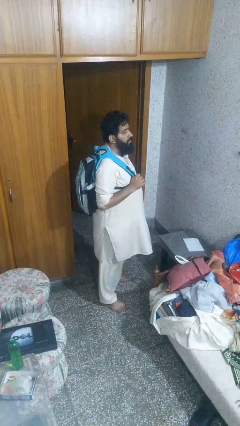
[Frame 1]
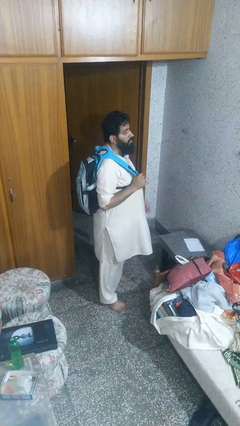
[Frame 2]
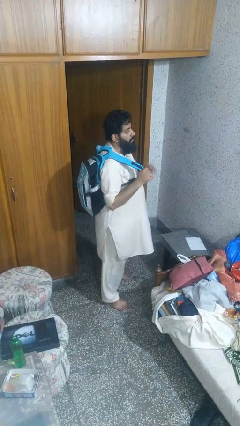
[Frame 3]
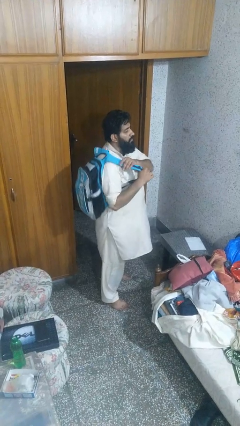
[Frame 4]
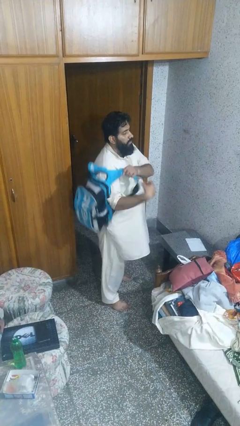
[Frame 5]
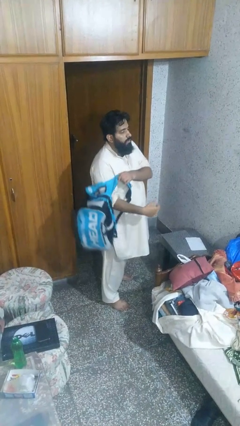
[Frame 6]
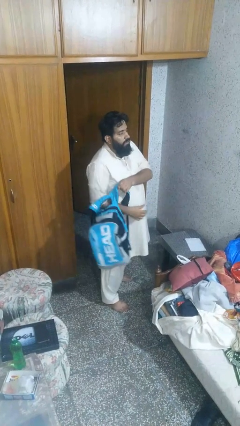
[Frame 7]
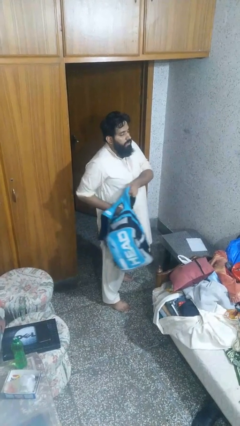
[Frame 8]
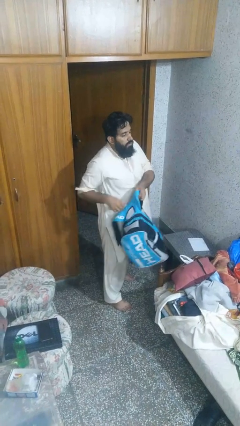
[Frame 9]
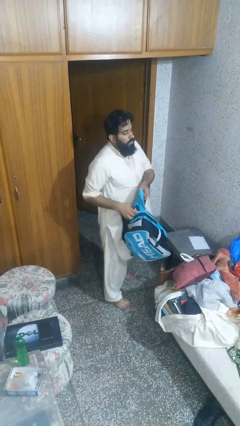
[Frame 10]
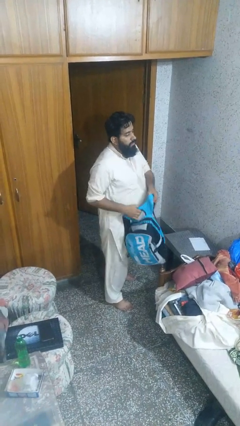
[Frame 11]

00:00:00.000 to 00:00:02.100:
person takes off backpack

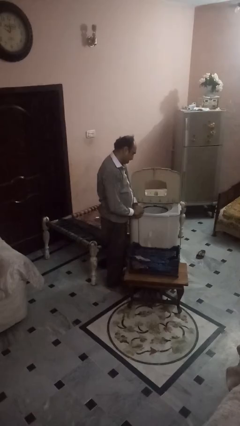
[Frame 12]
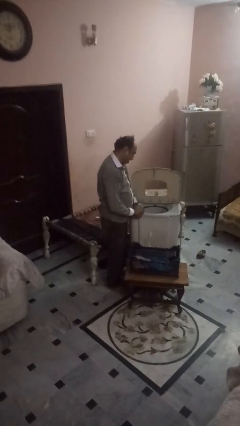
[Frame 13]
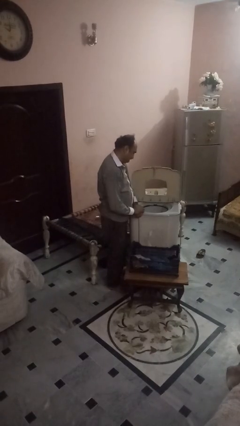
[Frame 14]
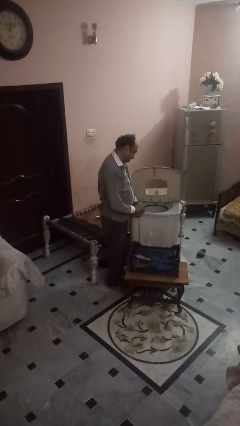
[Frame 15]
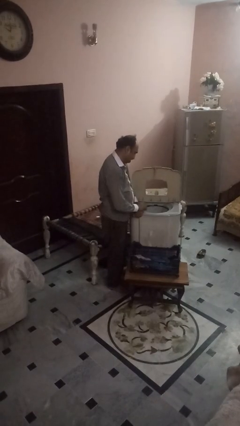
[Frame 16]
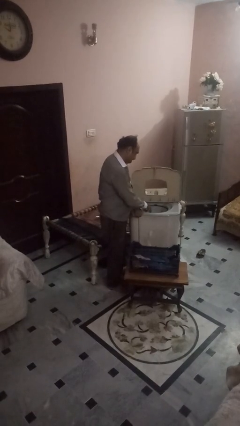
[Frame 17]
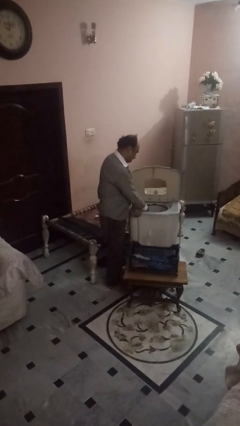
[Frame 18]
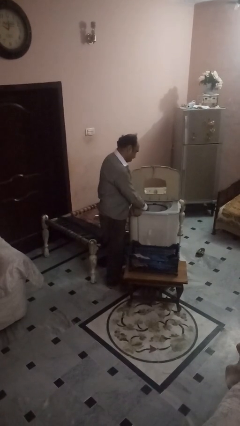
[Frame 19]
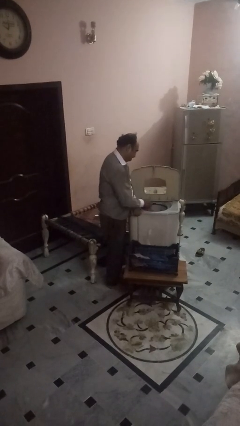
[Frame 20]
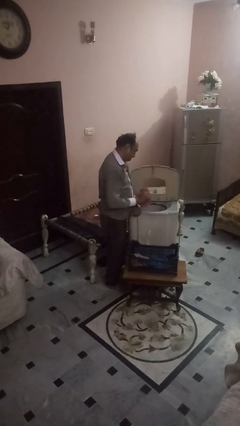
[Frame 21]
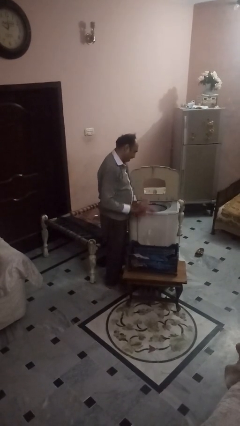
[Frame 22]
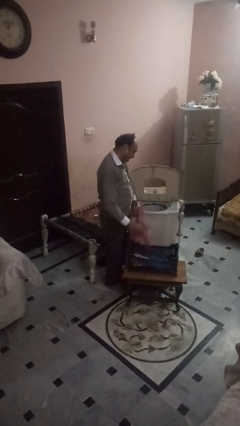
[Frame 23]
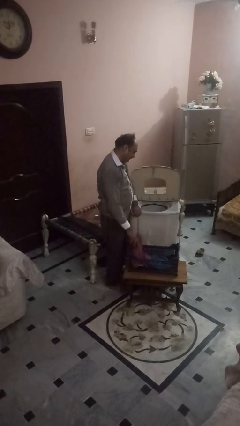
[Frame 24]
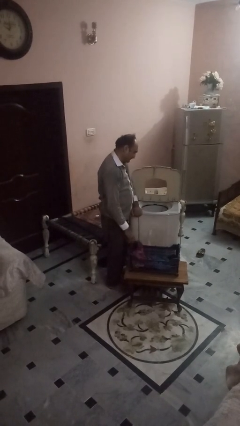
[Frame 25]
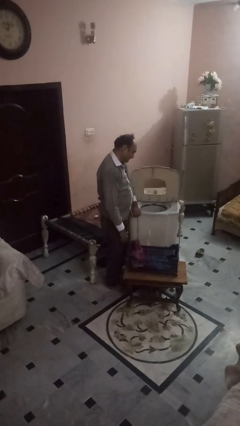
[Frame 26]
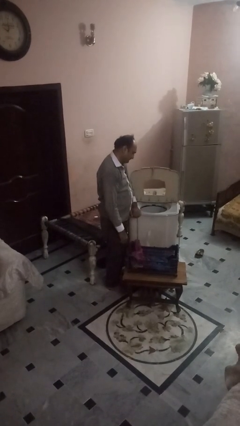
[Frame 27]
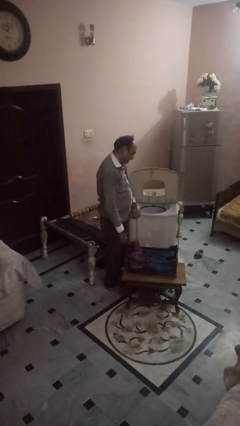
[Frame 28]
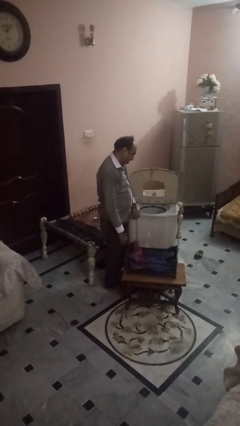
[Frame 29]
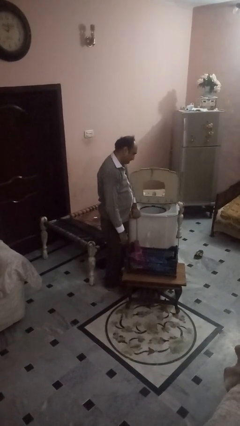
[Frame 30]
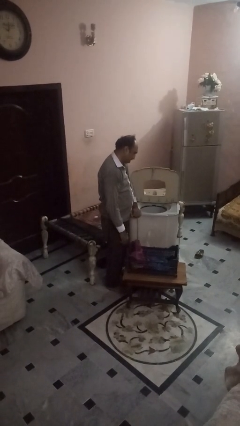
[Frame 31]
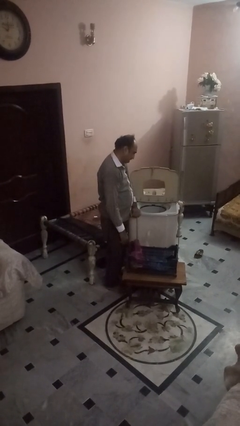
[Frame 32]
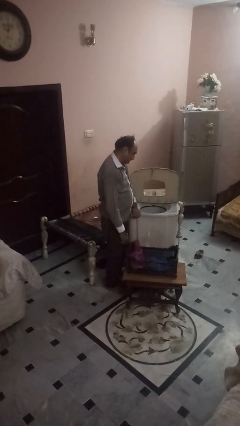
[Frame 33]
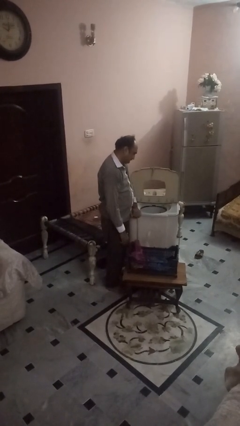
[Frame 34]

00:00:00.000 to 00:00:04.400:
person unloads dryer

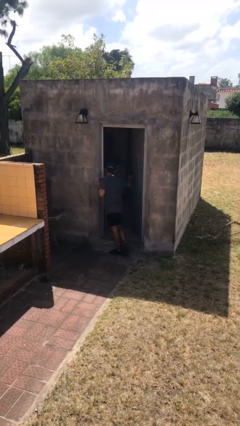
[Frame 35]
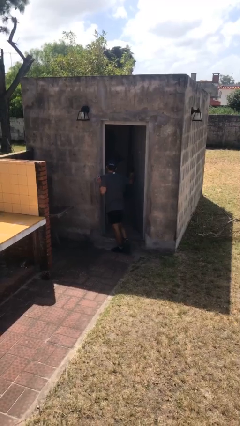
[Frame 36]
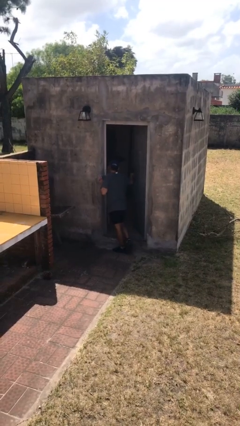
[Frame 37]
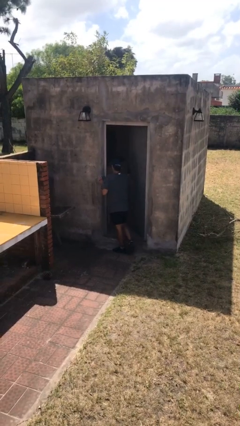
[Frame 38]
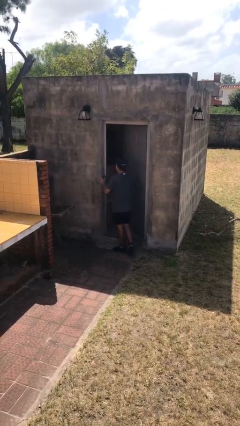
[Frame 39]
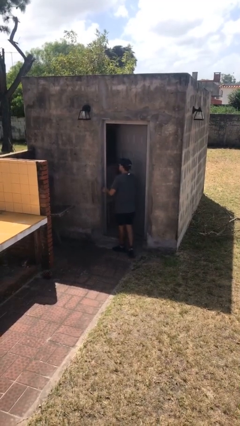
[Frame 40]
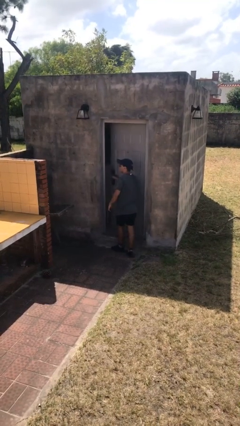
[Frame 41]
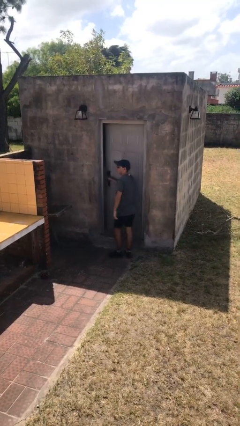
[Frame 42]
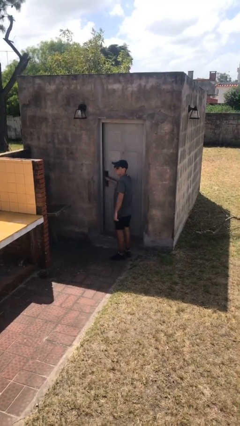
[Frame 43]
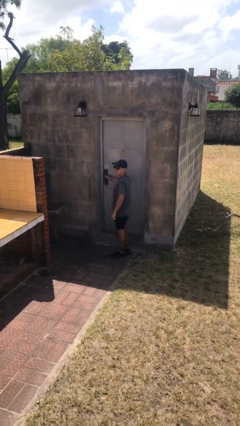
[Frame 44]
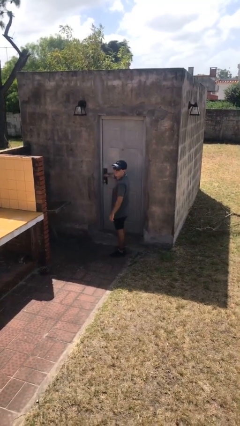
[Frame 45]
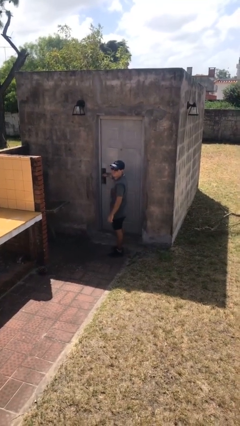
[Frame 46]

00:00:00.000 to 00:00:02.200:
person closes facility door

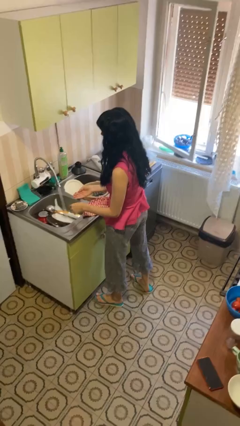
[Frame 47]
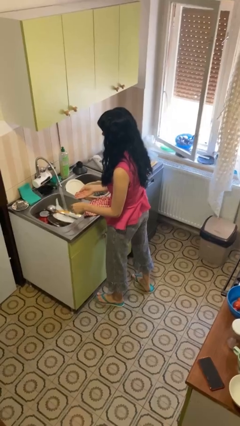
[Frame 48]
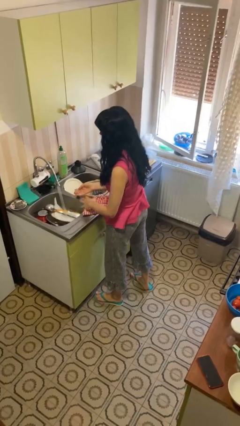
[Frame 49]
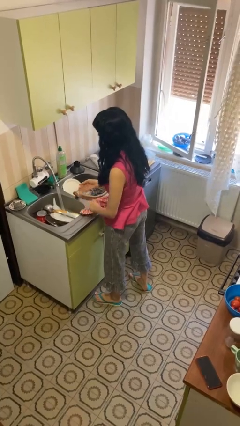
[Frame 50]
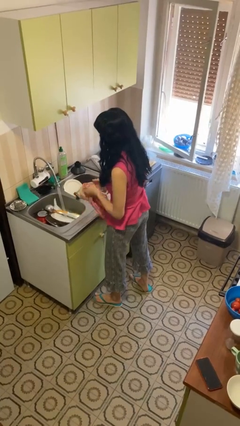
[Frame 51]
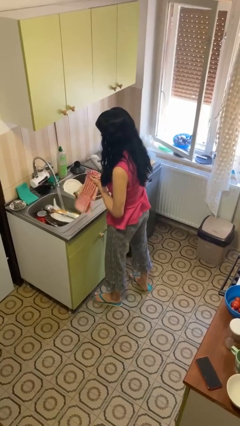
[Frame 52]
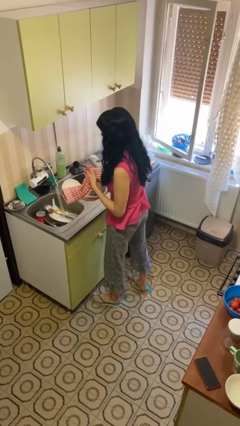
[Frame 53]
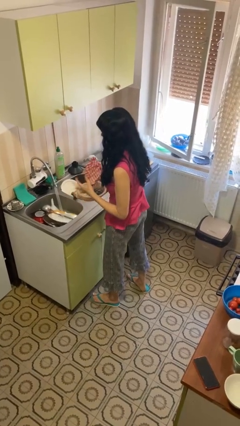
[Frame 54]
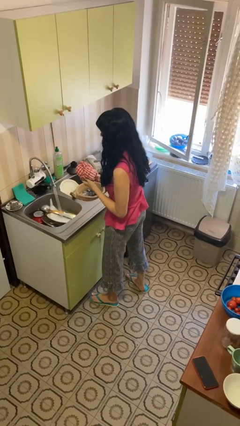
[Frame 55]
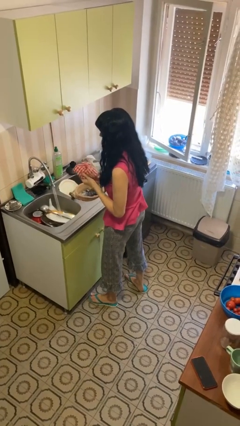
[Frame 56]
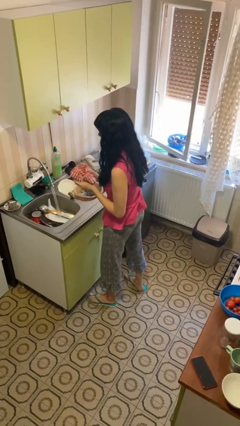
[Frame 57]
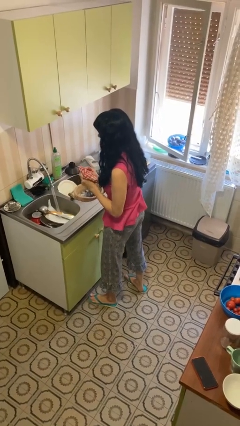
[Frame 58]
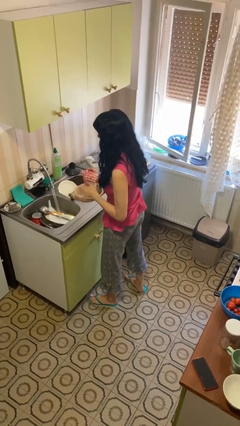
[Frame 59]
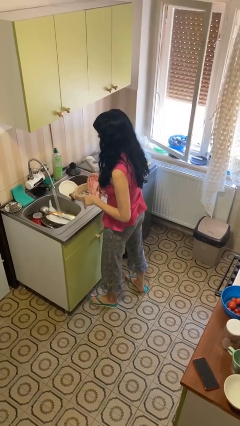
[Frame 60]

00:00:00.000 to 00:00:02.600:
person dries hands with towel

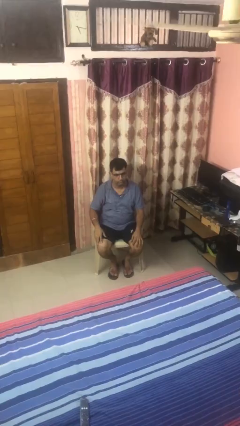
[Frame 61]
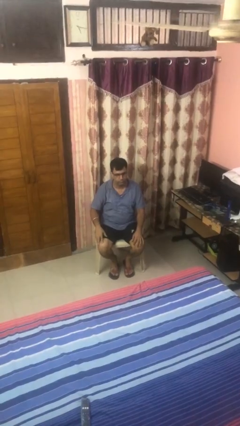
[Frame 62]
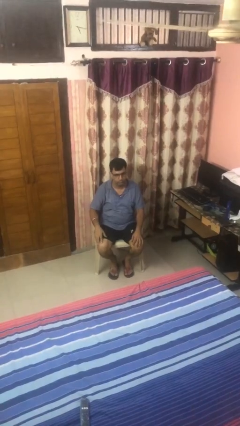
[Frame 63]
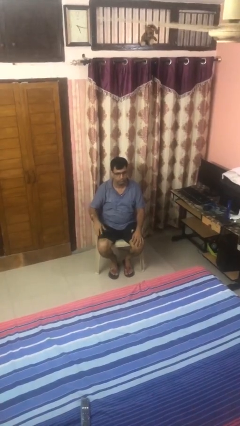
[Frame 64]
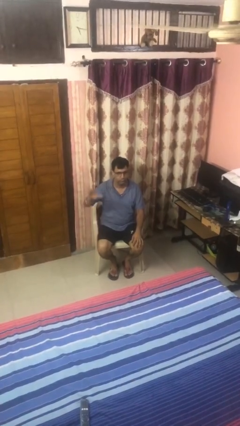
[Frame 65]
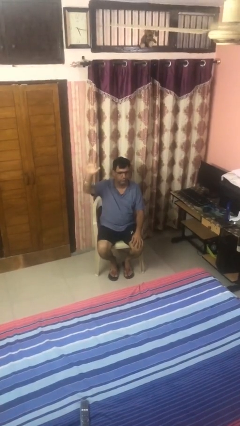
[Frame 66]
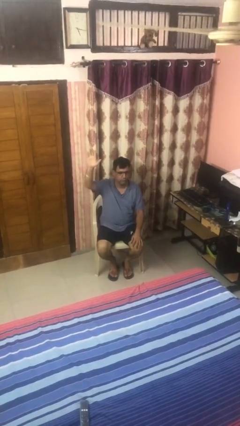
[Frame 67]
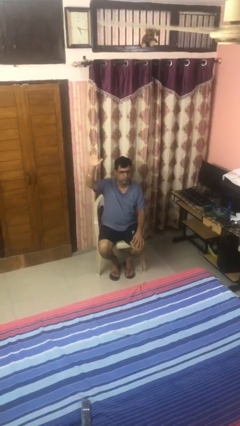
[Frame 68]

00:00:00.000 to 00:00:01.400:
person gestures raise hand

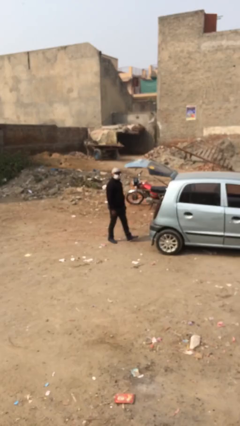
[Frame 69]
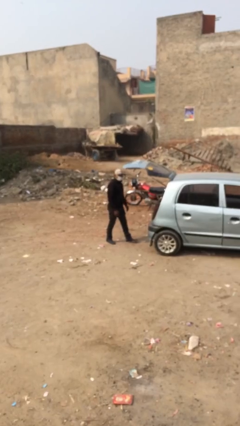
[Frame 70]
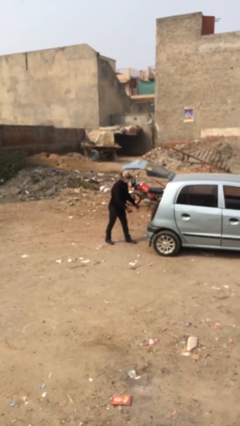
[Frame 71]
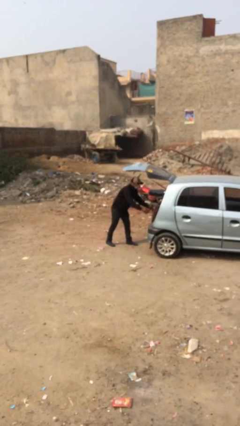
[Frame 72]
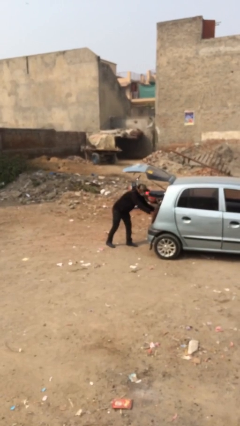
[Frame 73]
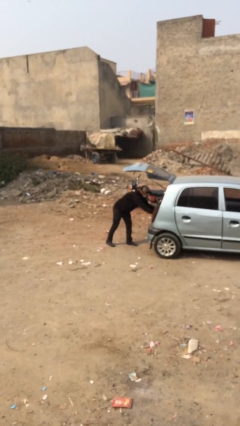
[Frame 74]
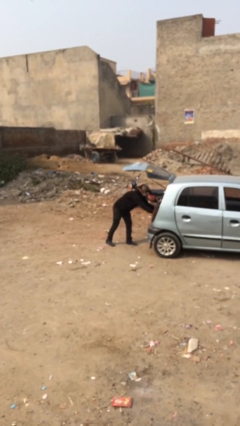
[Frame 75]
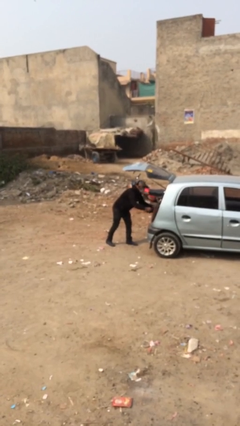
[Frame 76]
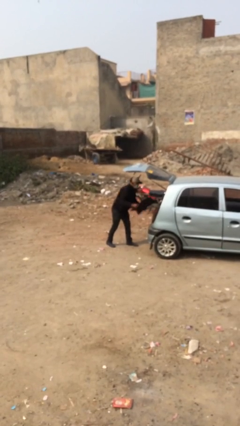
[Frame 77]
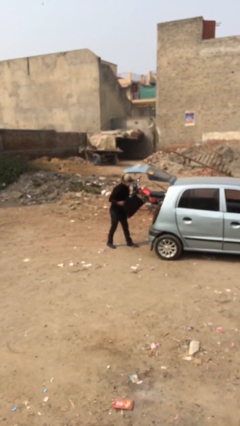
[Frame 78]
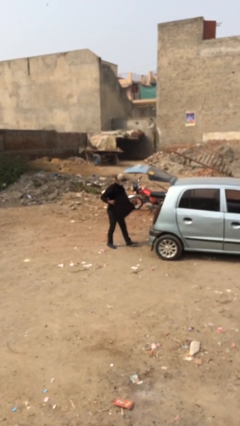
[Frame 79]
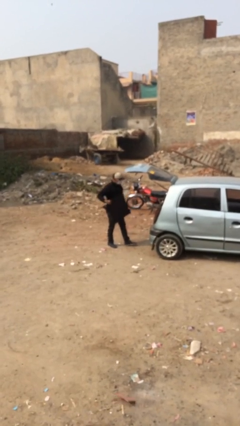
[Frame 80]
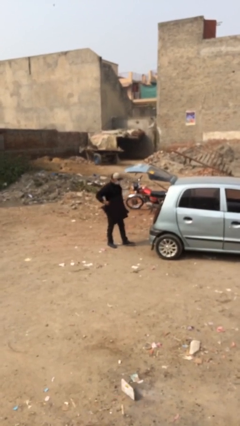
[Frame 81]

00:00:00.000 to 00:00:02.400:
person unloads car

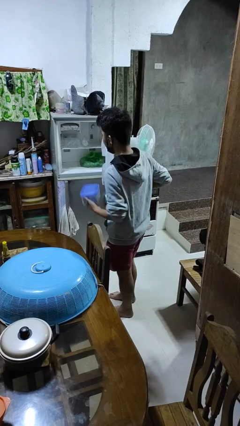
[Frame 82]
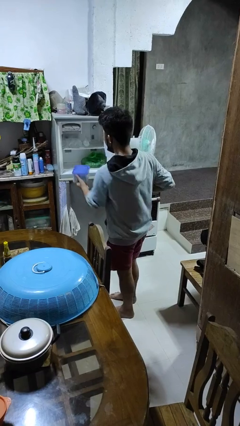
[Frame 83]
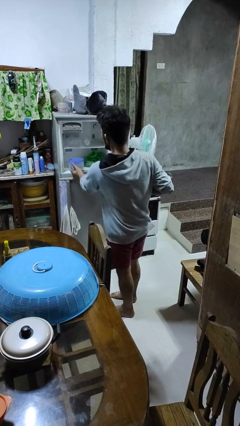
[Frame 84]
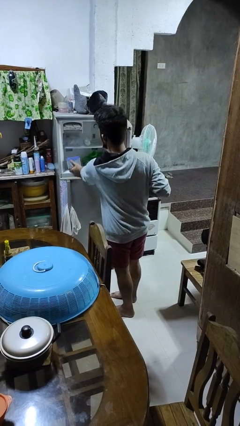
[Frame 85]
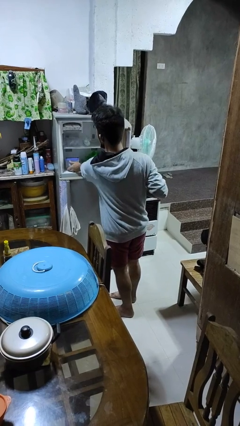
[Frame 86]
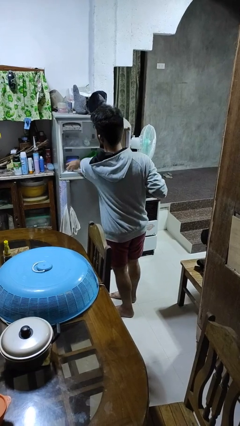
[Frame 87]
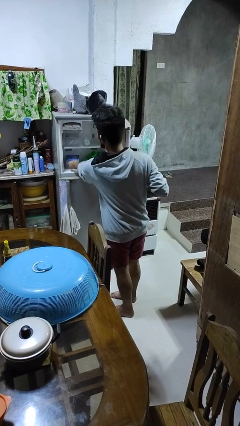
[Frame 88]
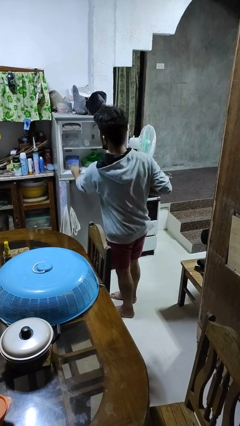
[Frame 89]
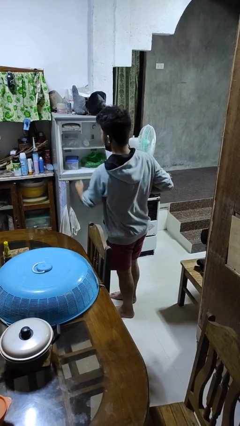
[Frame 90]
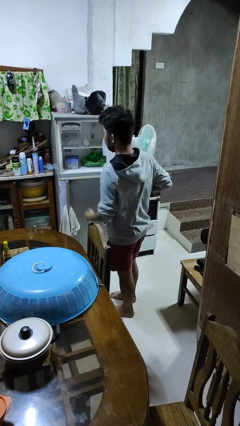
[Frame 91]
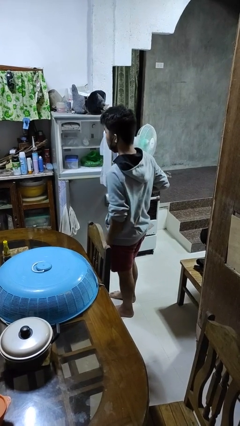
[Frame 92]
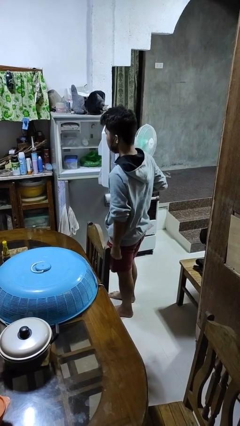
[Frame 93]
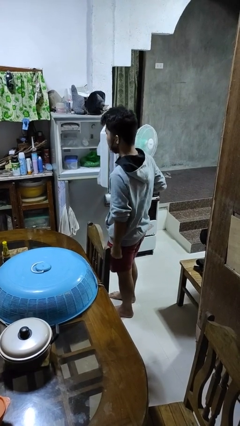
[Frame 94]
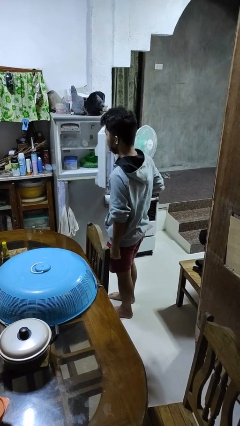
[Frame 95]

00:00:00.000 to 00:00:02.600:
person puts object into refrigerator
